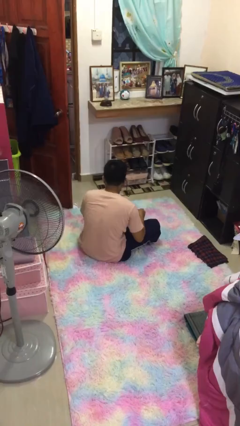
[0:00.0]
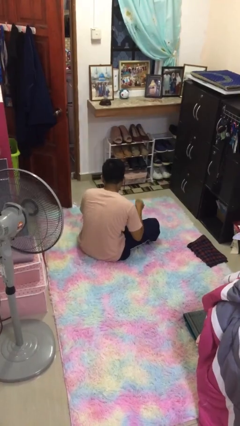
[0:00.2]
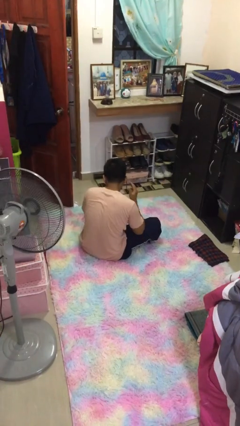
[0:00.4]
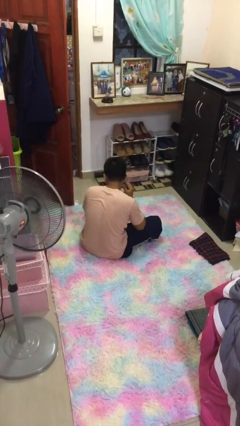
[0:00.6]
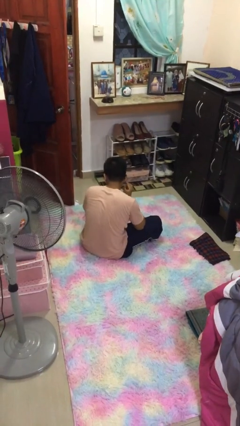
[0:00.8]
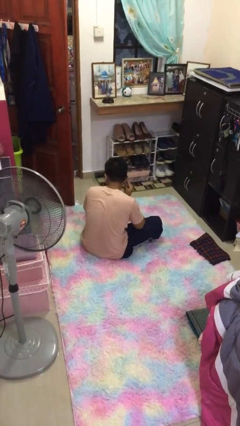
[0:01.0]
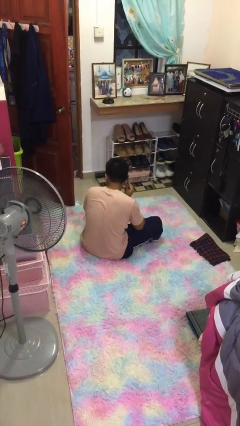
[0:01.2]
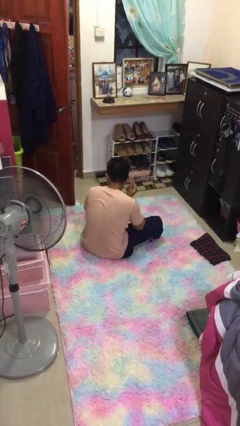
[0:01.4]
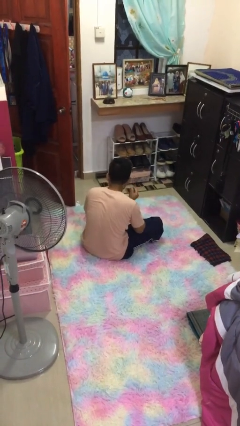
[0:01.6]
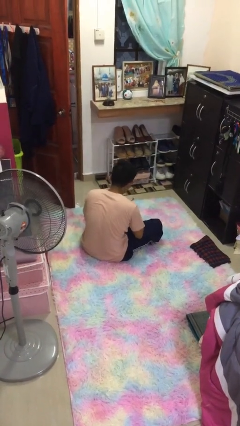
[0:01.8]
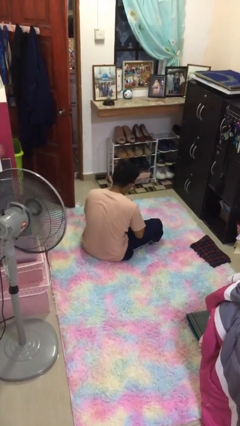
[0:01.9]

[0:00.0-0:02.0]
person takes off earrings

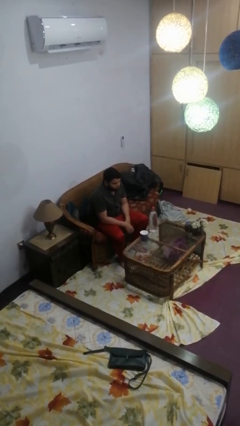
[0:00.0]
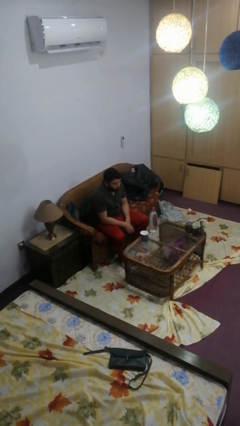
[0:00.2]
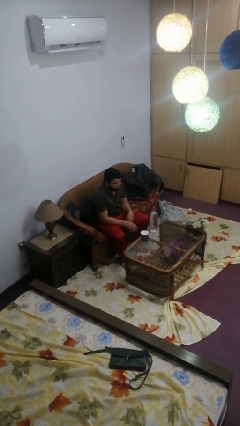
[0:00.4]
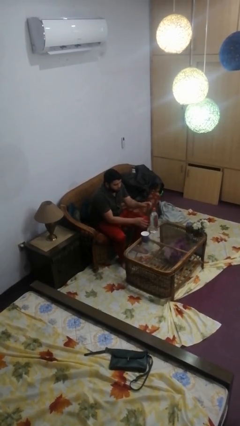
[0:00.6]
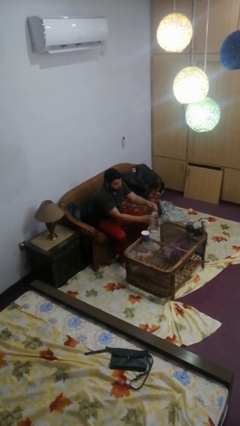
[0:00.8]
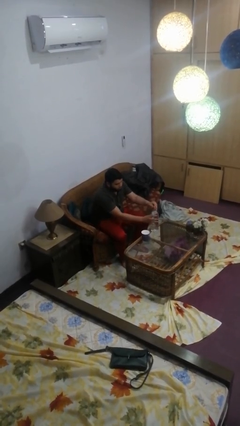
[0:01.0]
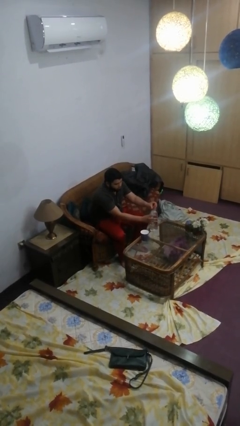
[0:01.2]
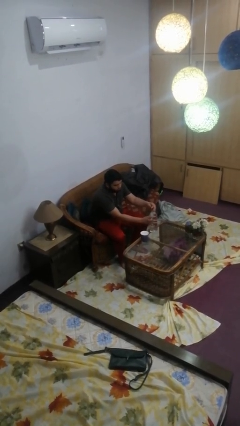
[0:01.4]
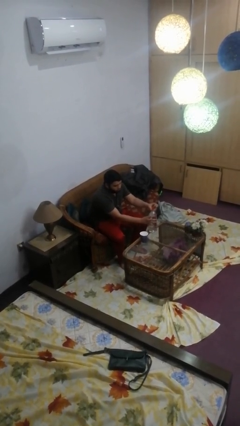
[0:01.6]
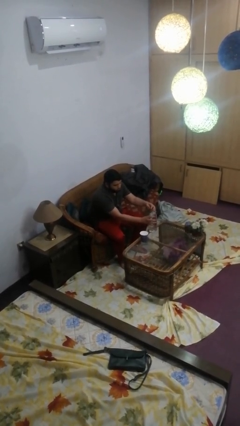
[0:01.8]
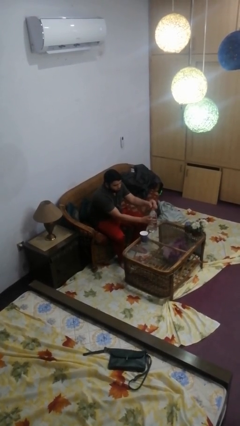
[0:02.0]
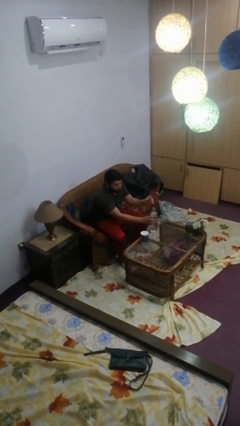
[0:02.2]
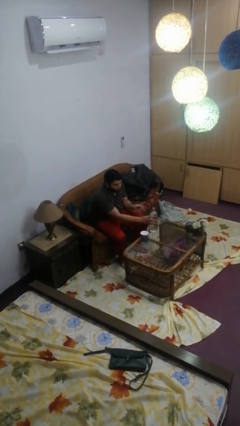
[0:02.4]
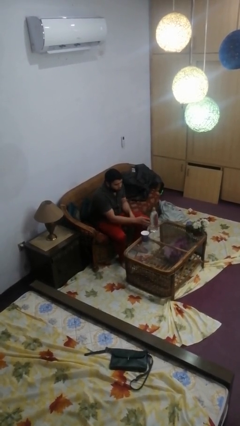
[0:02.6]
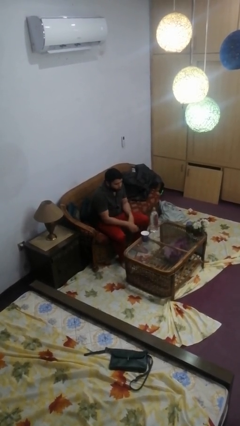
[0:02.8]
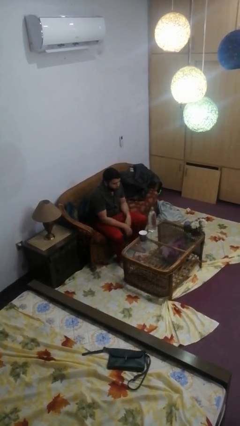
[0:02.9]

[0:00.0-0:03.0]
person unscrews lid from bottle

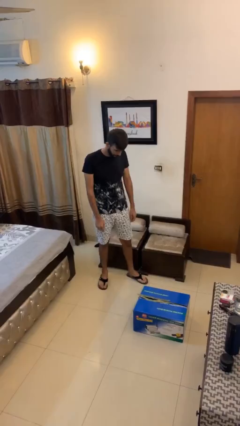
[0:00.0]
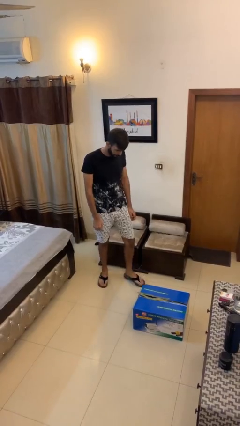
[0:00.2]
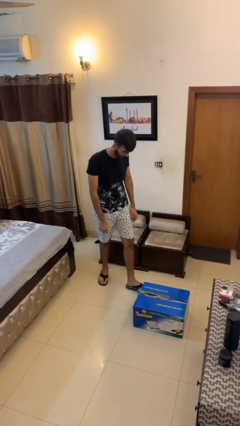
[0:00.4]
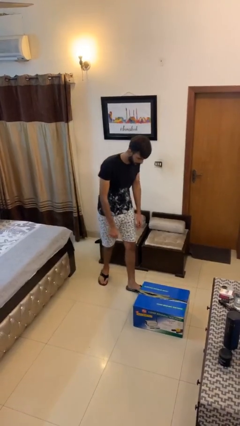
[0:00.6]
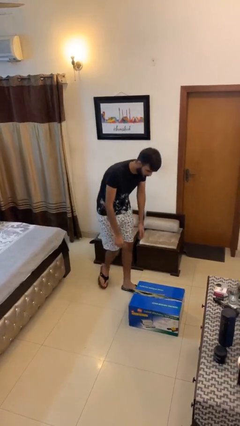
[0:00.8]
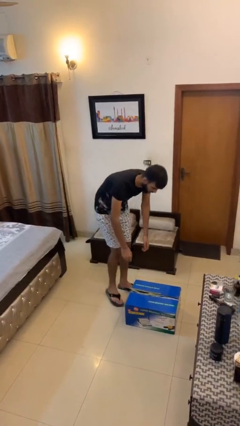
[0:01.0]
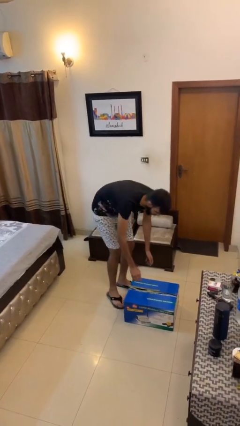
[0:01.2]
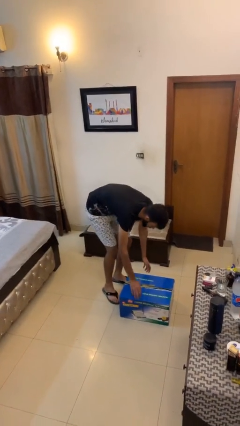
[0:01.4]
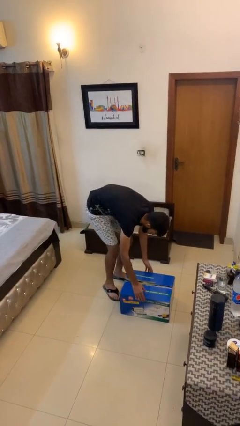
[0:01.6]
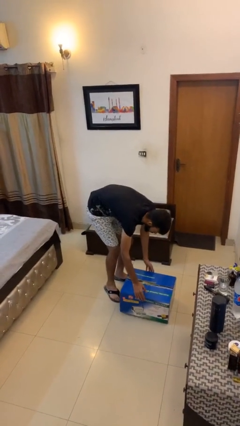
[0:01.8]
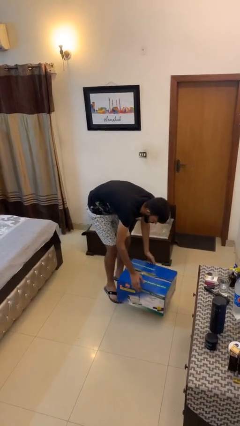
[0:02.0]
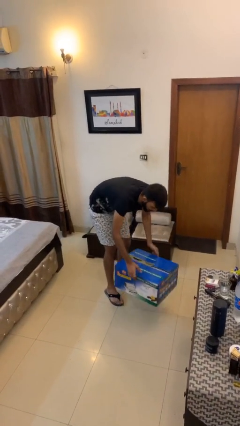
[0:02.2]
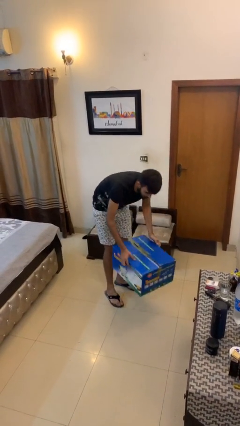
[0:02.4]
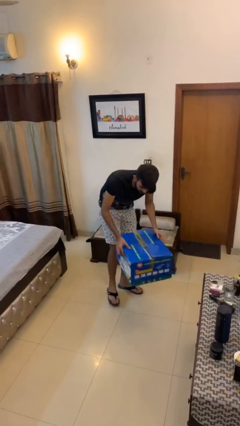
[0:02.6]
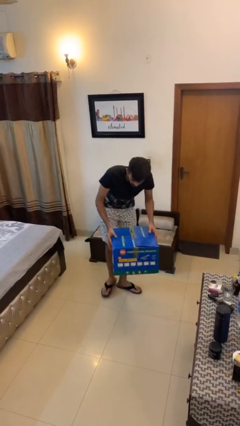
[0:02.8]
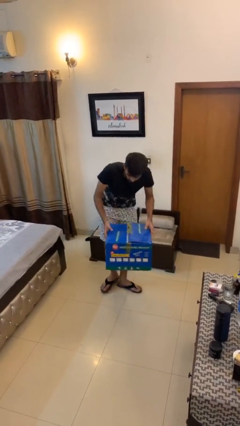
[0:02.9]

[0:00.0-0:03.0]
person picks up object from floor

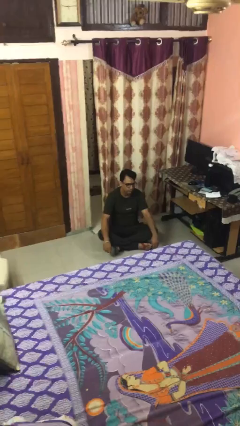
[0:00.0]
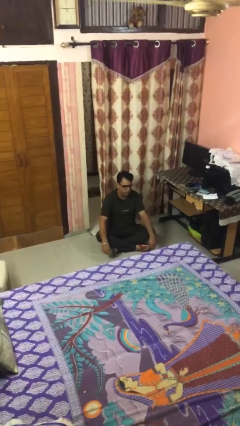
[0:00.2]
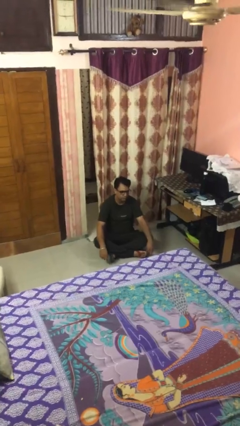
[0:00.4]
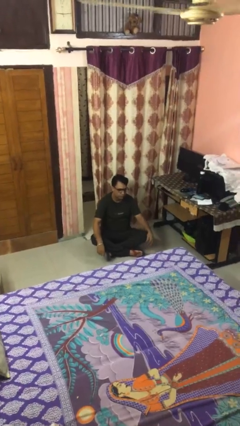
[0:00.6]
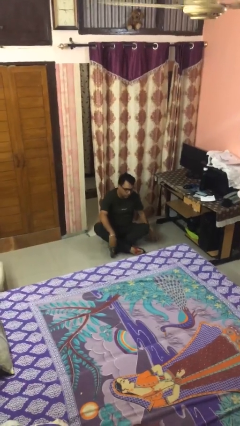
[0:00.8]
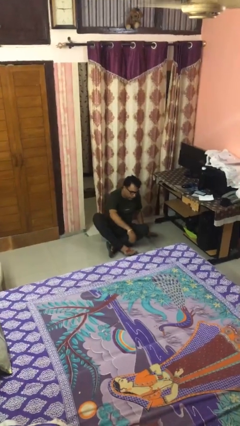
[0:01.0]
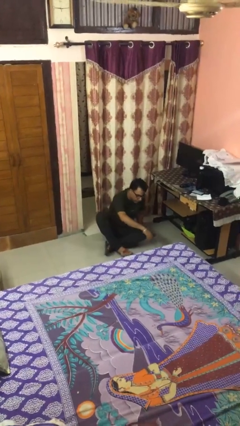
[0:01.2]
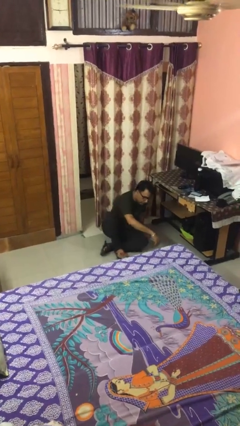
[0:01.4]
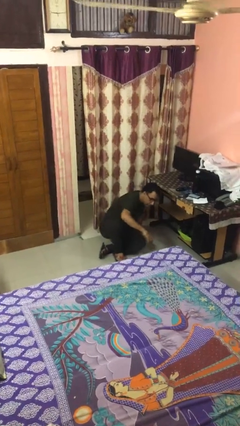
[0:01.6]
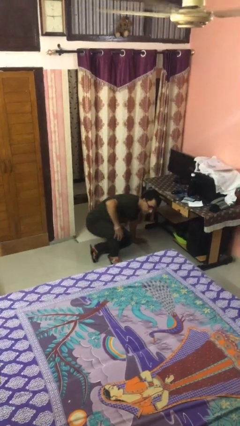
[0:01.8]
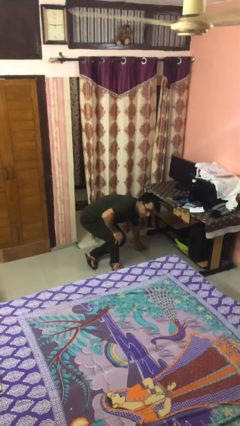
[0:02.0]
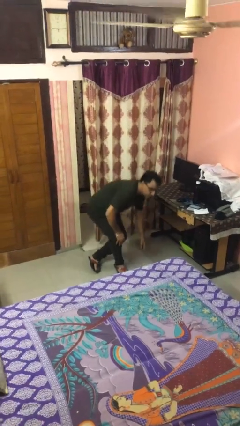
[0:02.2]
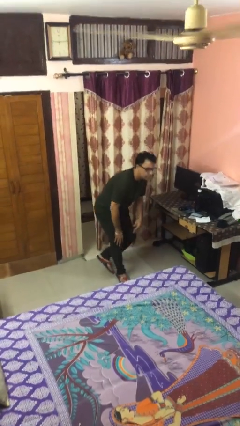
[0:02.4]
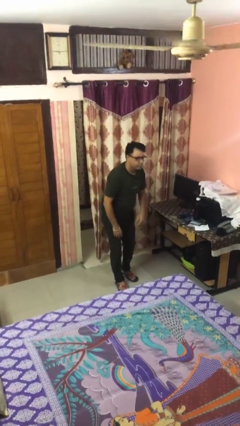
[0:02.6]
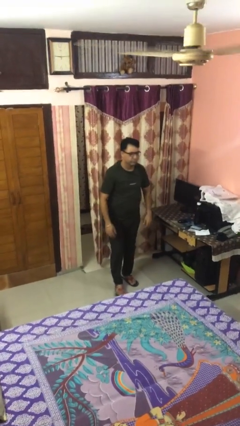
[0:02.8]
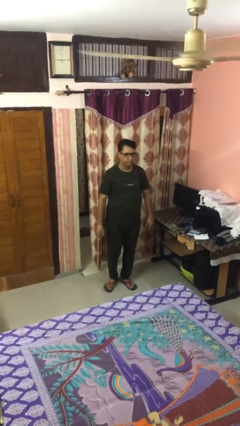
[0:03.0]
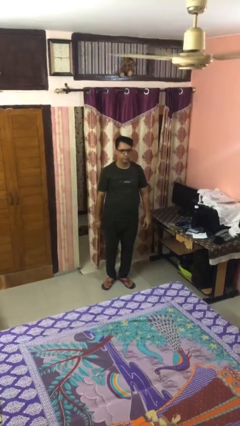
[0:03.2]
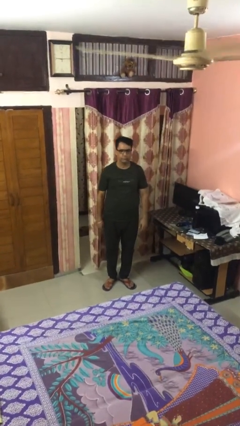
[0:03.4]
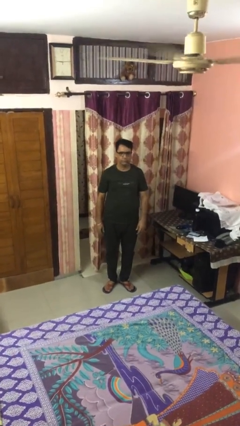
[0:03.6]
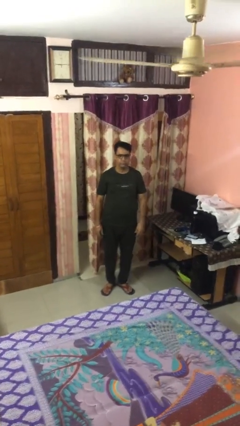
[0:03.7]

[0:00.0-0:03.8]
person stands up from floor

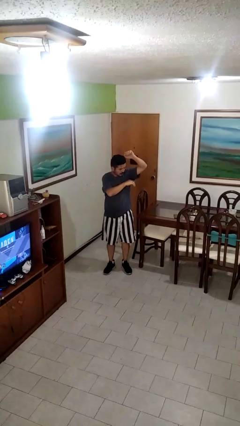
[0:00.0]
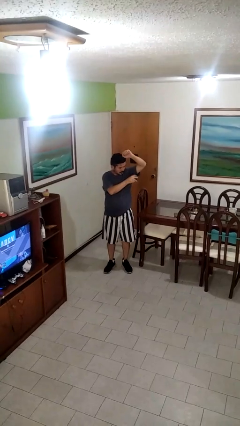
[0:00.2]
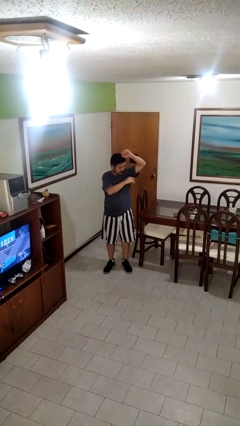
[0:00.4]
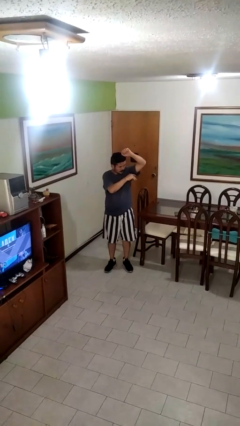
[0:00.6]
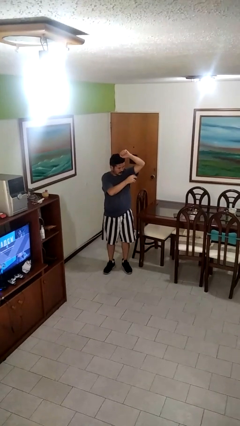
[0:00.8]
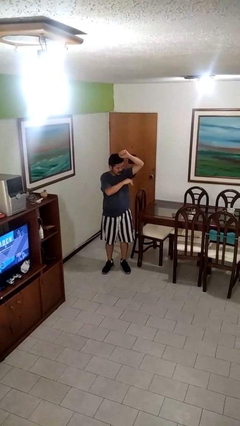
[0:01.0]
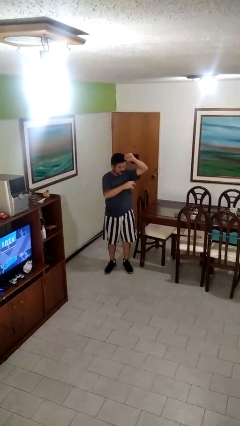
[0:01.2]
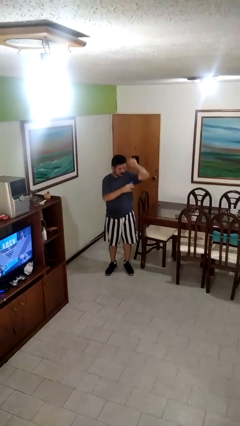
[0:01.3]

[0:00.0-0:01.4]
person applies deodorant

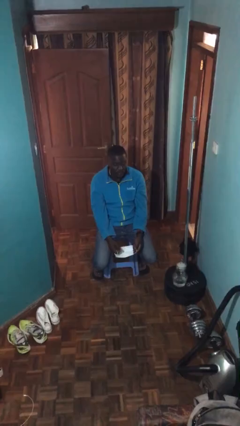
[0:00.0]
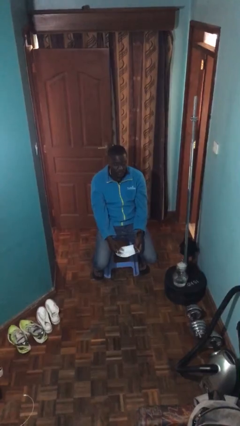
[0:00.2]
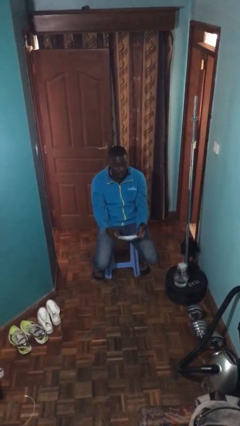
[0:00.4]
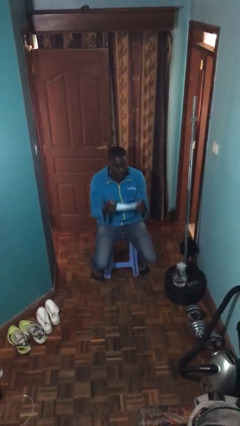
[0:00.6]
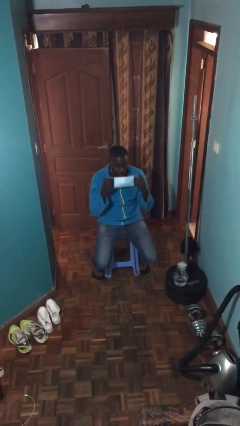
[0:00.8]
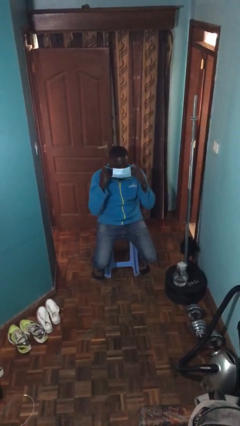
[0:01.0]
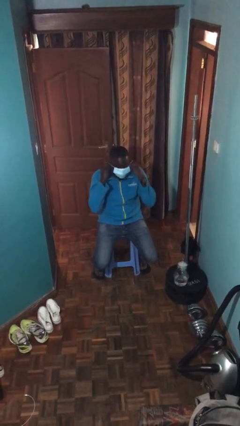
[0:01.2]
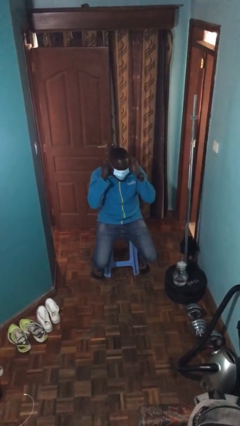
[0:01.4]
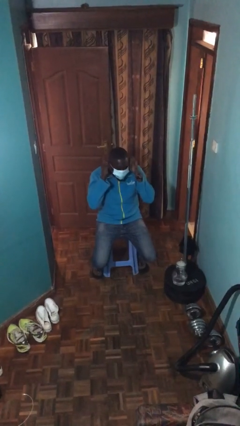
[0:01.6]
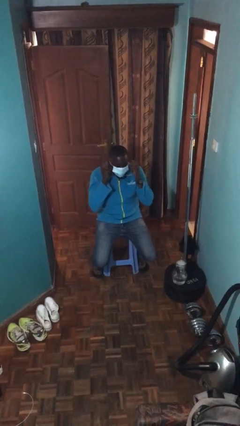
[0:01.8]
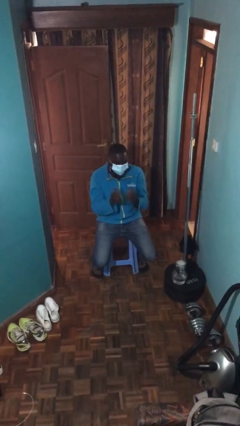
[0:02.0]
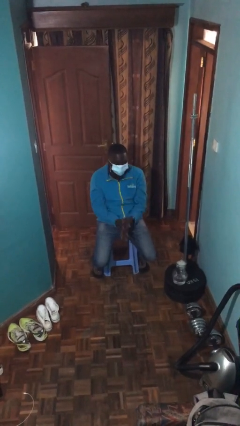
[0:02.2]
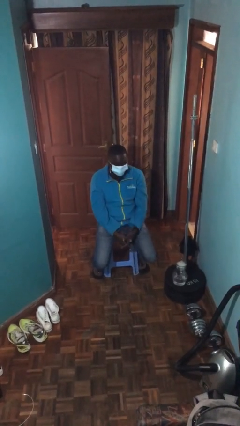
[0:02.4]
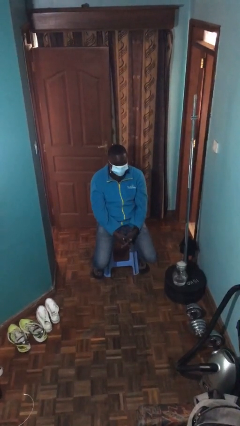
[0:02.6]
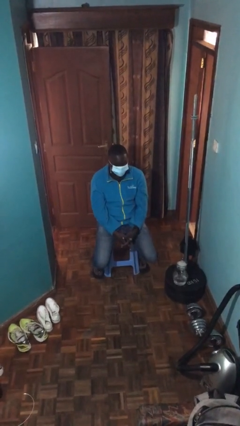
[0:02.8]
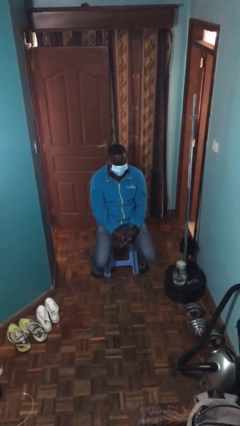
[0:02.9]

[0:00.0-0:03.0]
person puts on facemask

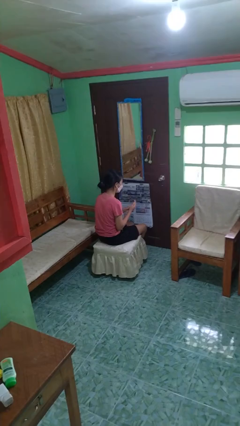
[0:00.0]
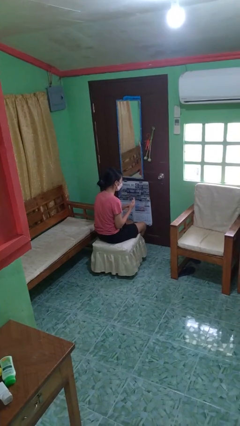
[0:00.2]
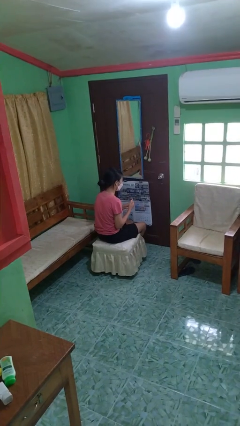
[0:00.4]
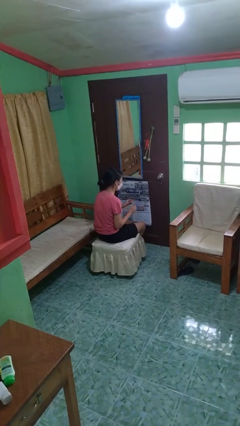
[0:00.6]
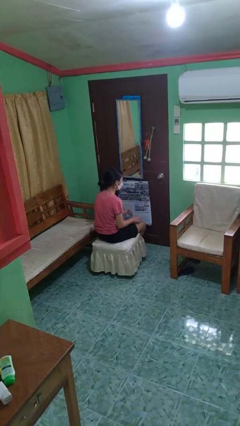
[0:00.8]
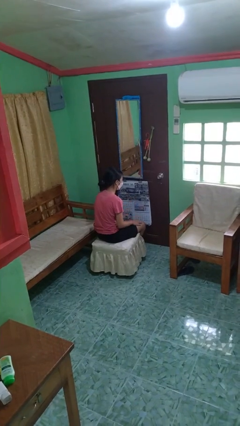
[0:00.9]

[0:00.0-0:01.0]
person takes off ring
